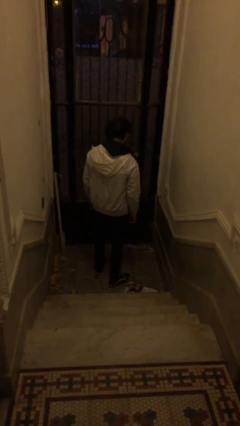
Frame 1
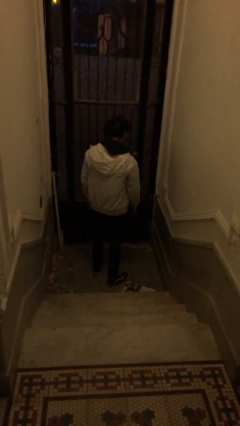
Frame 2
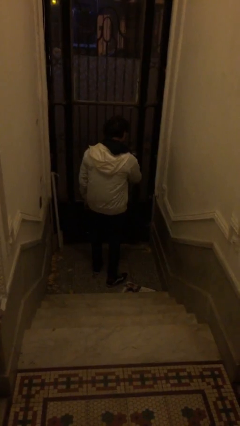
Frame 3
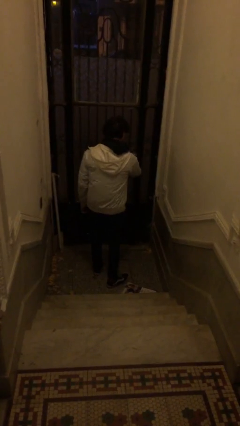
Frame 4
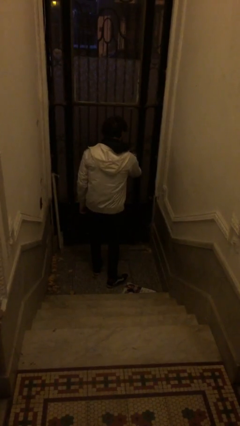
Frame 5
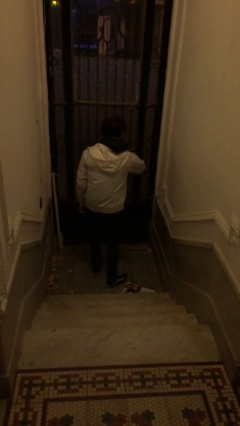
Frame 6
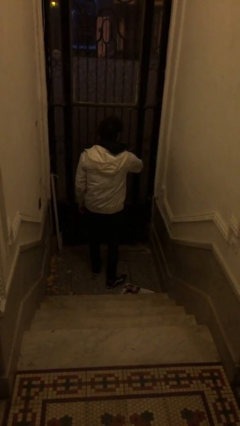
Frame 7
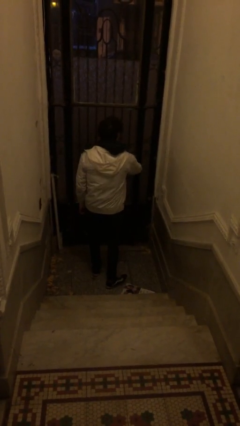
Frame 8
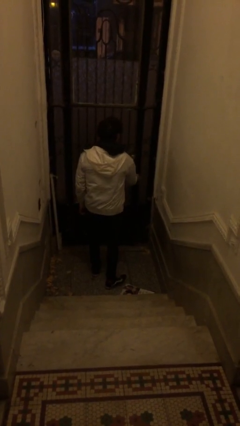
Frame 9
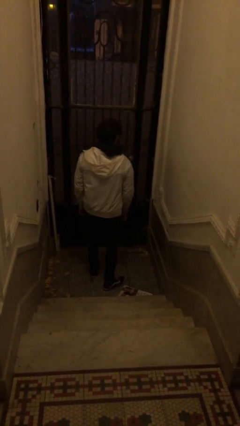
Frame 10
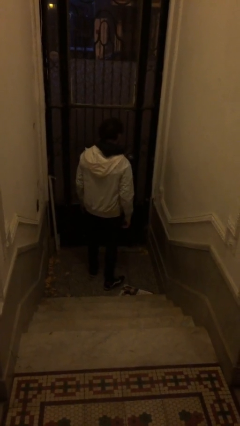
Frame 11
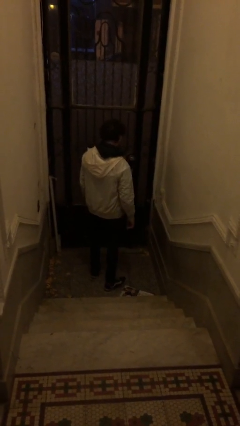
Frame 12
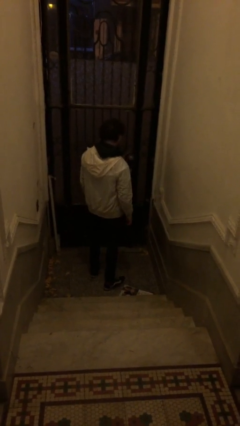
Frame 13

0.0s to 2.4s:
person unlocks door with keys

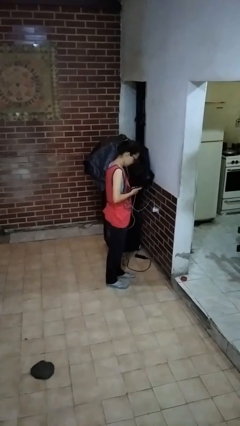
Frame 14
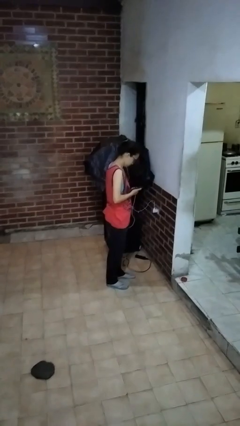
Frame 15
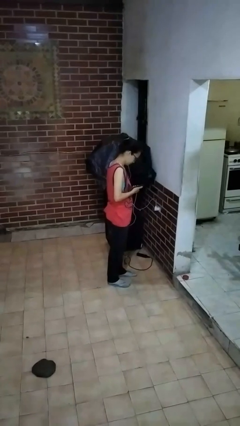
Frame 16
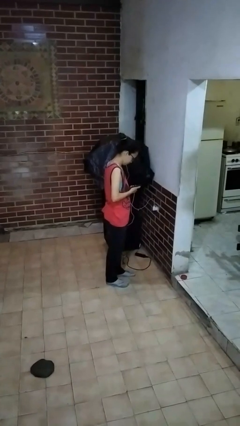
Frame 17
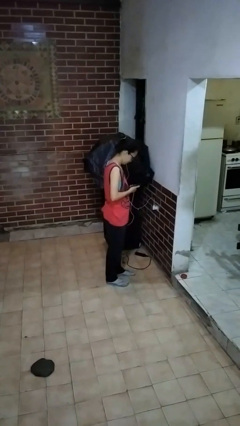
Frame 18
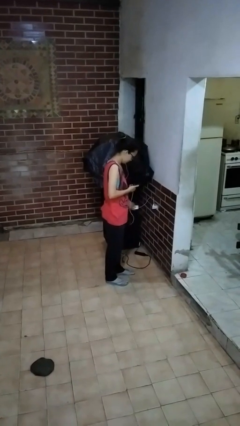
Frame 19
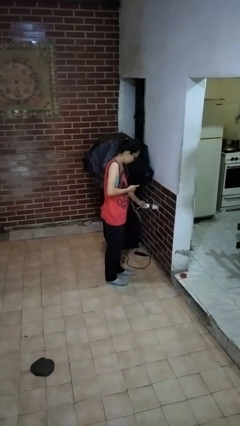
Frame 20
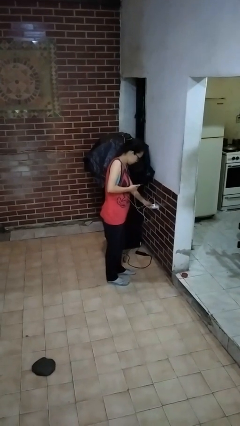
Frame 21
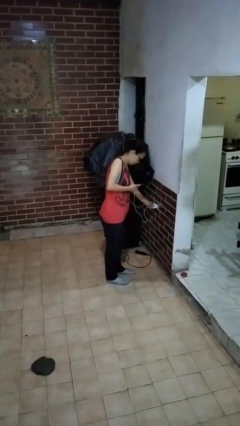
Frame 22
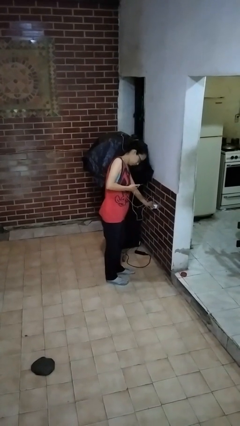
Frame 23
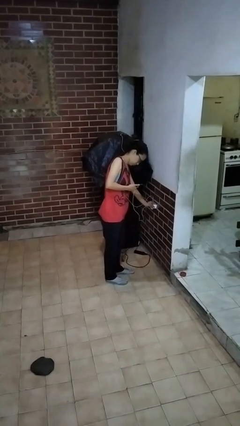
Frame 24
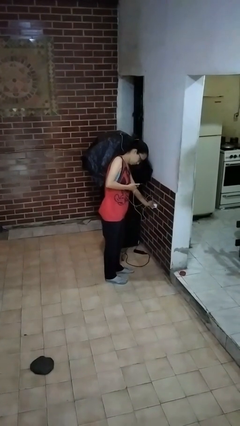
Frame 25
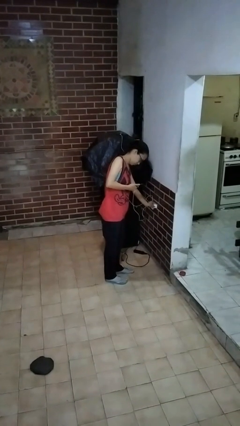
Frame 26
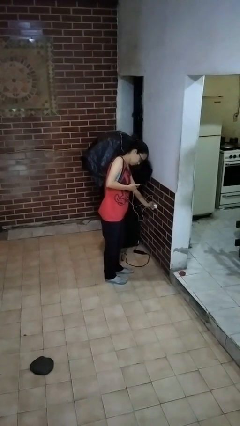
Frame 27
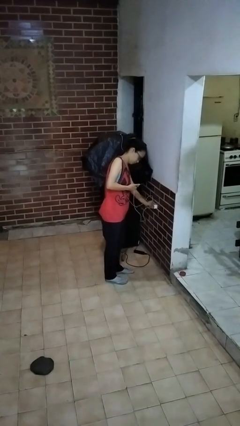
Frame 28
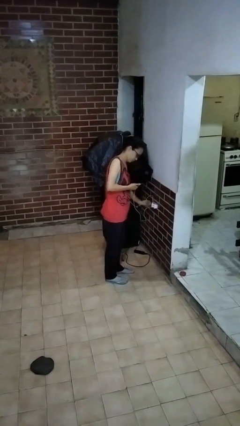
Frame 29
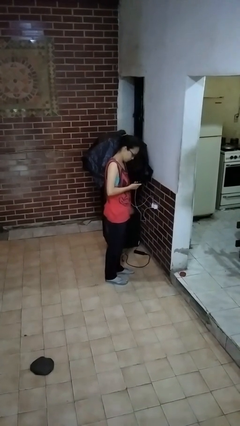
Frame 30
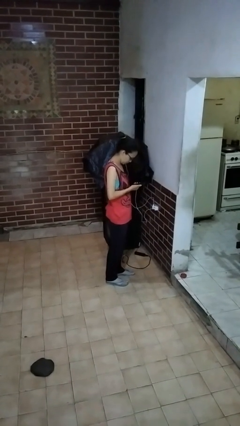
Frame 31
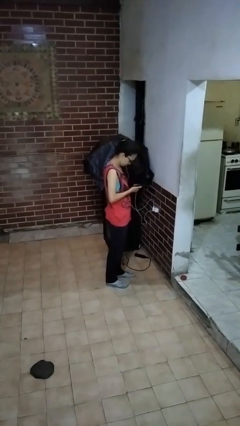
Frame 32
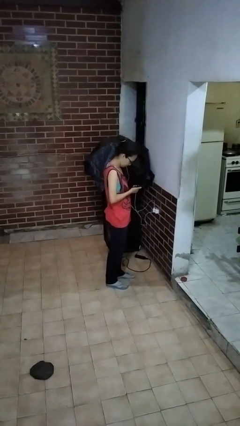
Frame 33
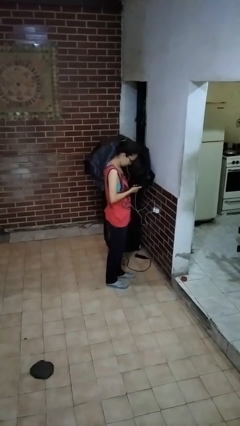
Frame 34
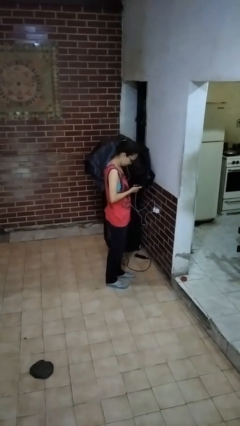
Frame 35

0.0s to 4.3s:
person plugs into electrical socket

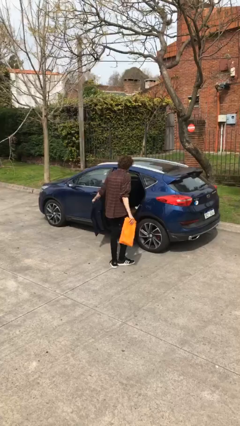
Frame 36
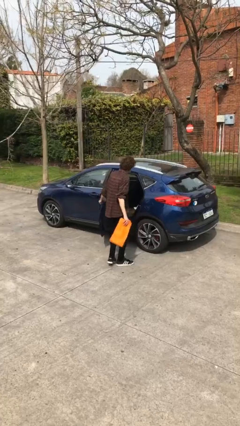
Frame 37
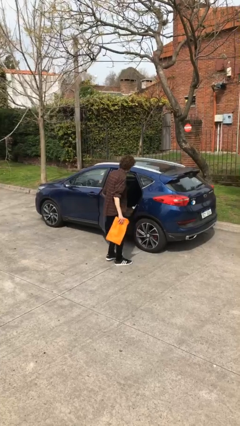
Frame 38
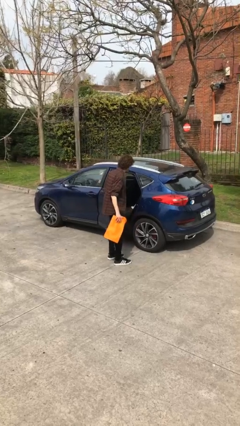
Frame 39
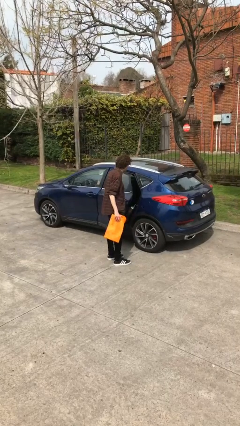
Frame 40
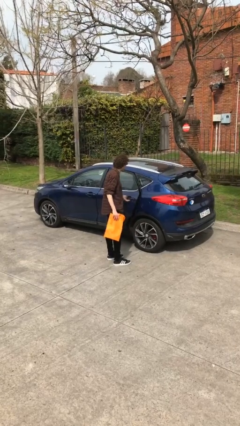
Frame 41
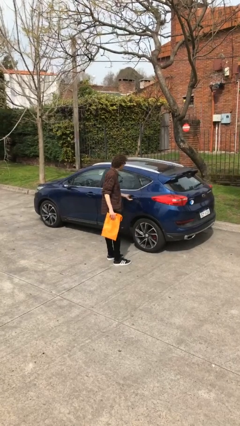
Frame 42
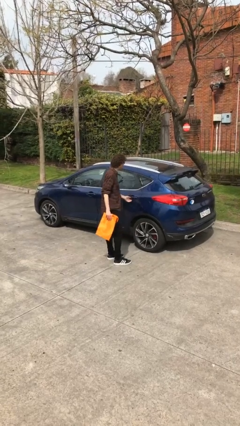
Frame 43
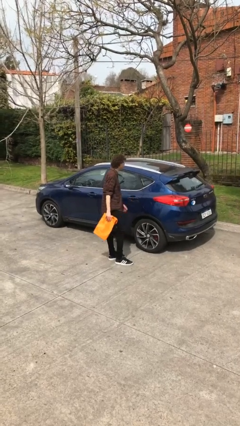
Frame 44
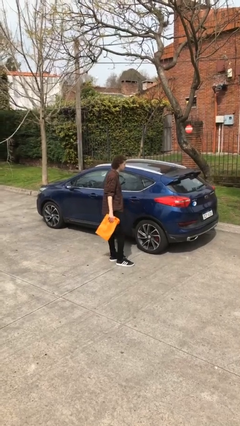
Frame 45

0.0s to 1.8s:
person closes car door

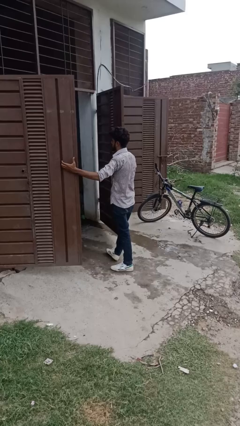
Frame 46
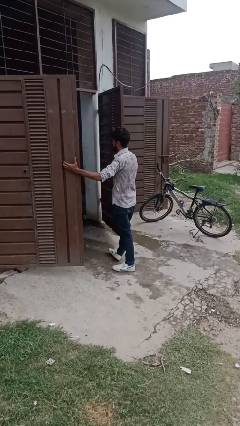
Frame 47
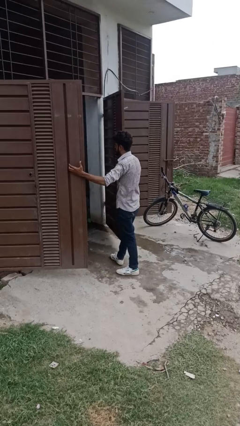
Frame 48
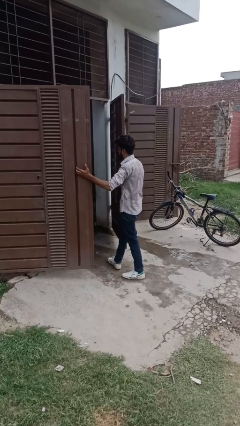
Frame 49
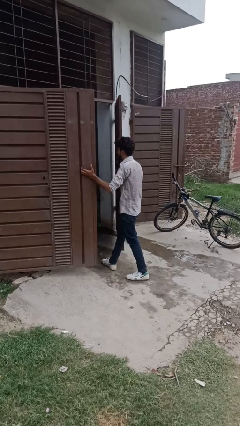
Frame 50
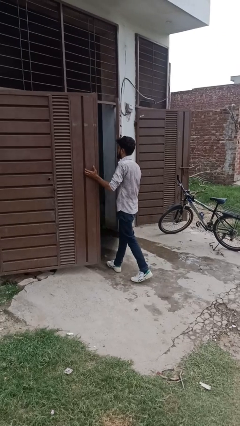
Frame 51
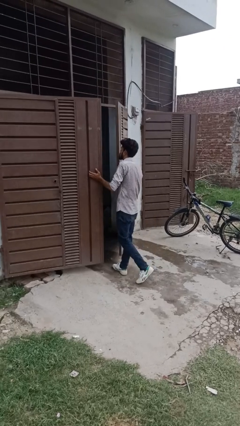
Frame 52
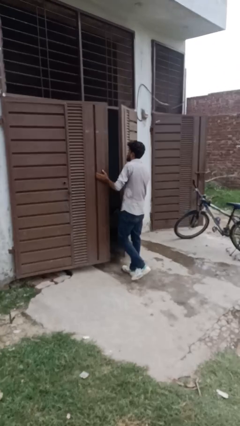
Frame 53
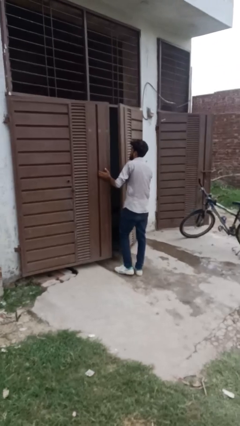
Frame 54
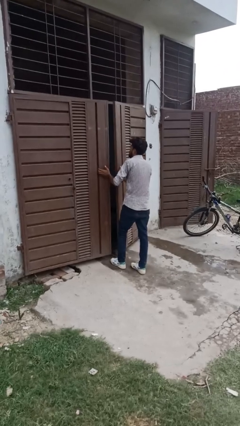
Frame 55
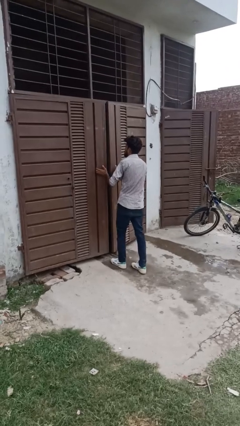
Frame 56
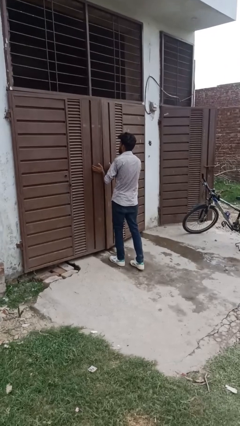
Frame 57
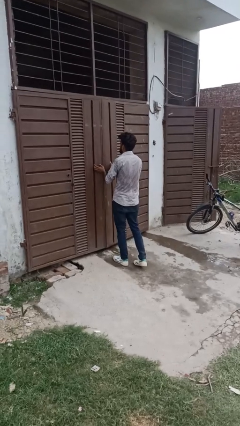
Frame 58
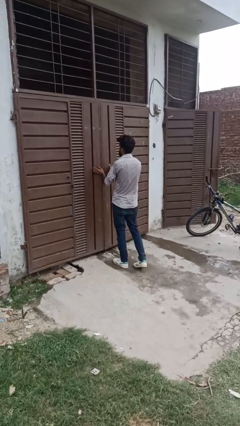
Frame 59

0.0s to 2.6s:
person closes gate

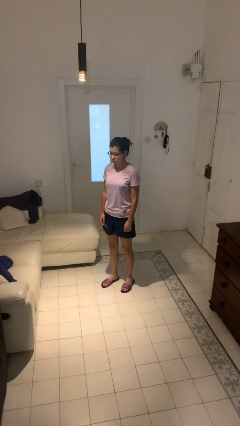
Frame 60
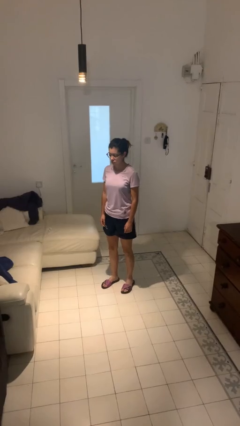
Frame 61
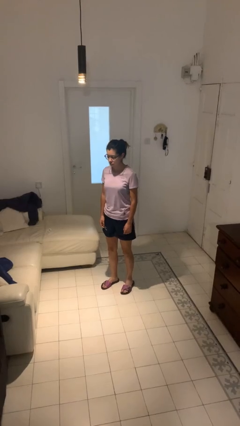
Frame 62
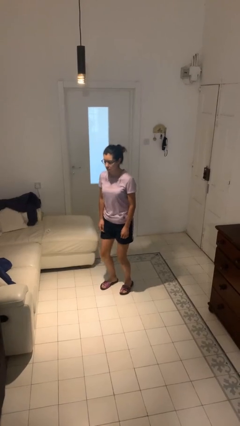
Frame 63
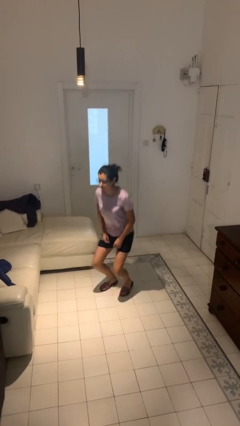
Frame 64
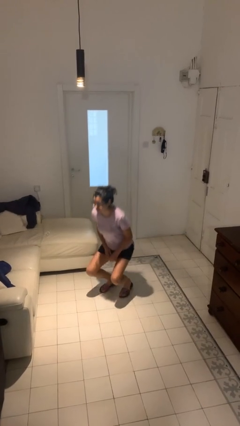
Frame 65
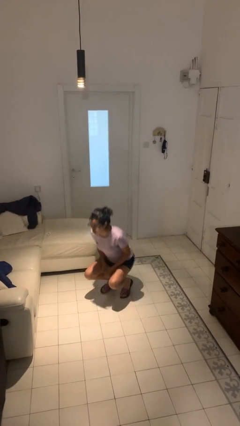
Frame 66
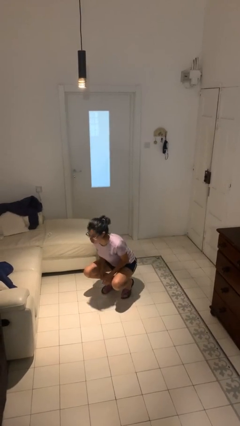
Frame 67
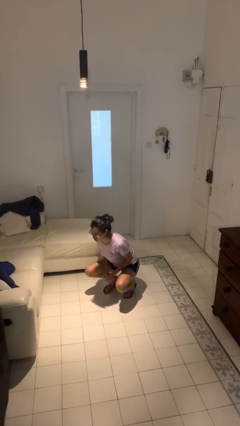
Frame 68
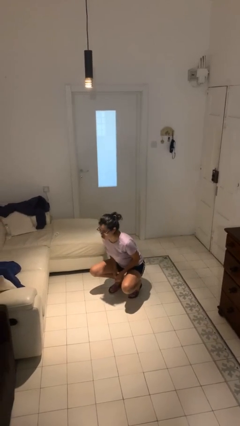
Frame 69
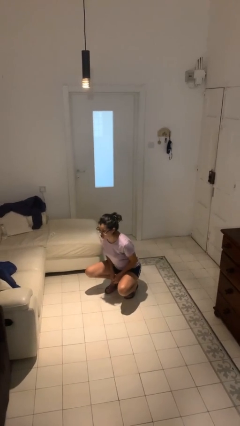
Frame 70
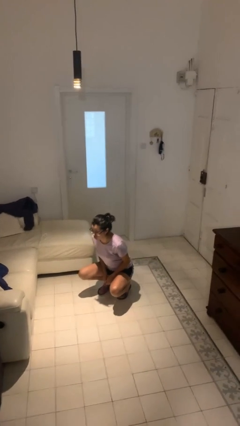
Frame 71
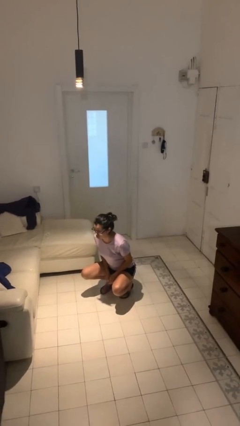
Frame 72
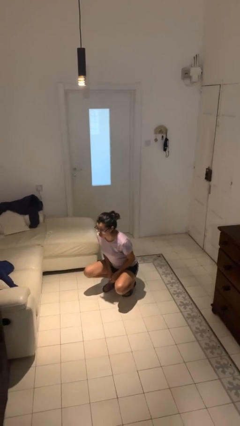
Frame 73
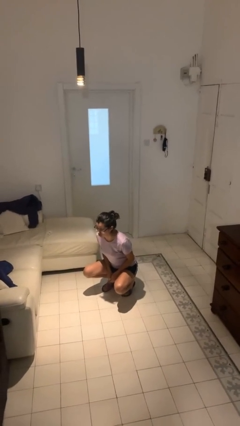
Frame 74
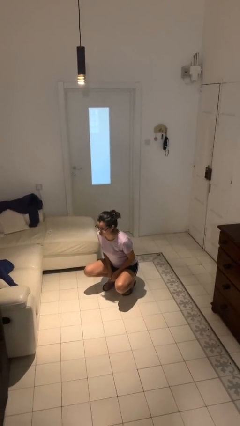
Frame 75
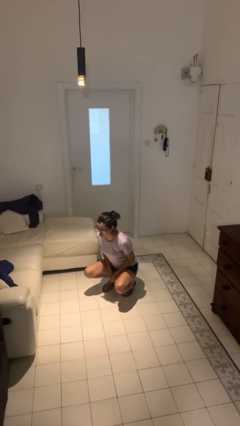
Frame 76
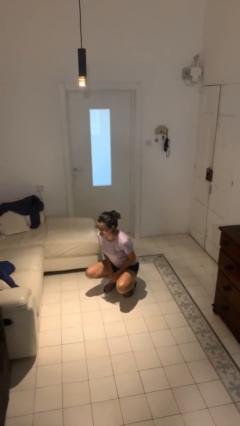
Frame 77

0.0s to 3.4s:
person squats

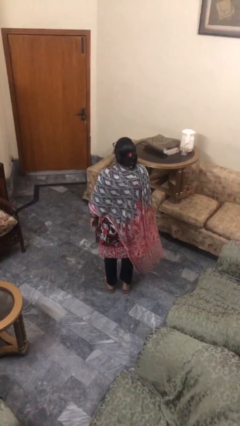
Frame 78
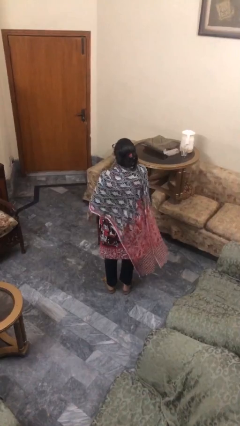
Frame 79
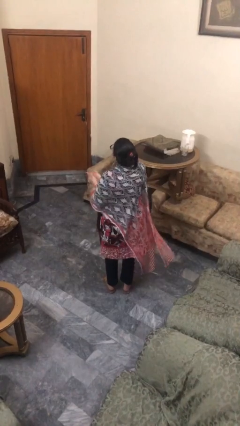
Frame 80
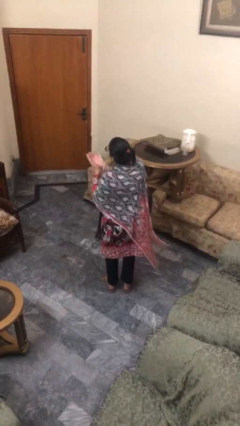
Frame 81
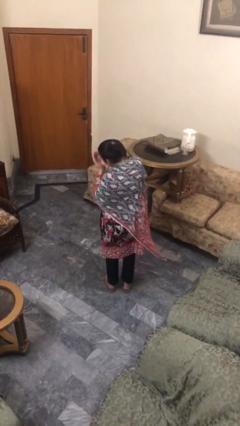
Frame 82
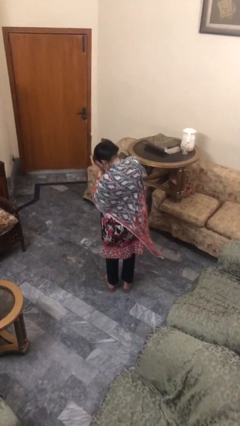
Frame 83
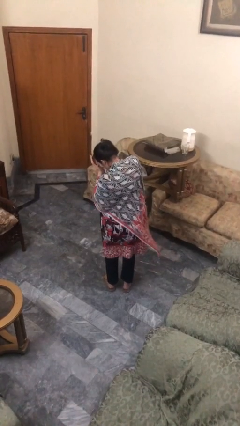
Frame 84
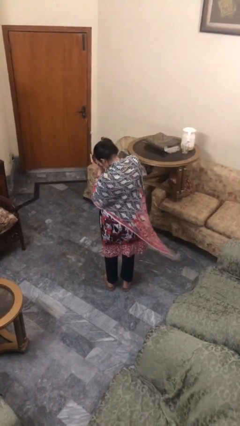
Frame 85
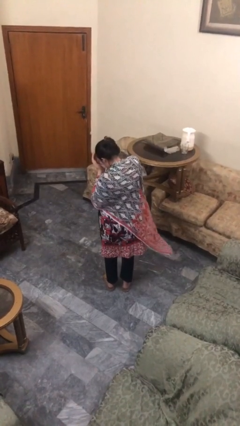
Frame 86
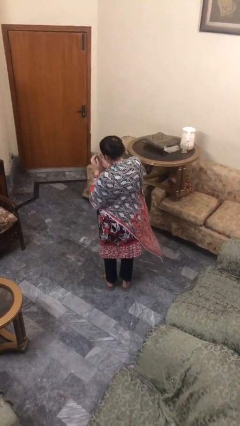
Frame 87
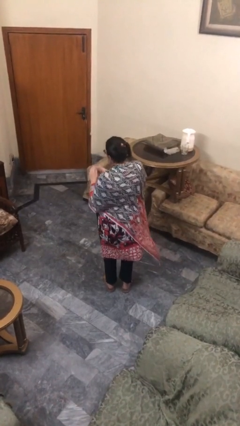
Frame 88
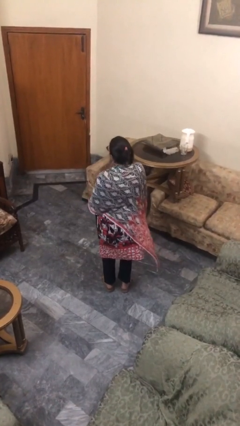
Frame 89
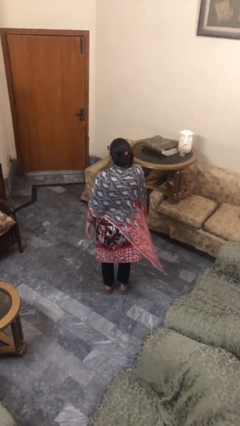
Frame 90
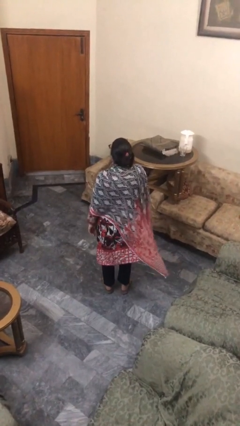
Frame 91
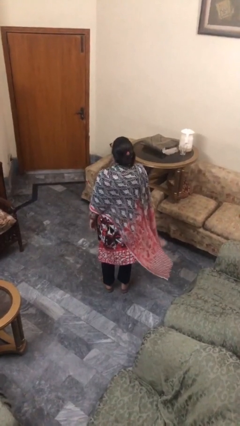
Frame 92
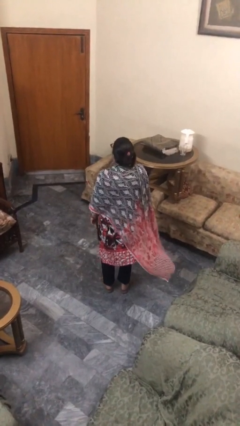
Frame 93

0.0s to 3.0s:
person sneezes into hand
